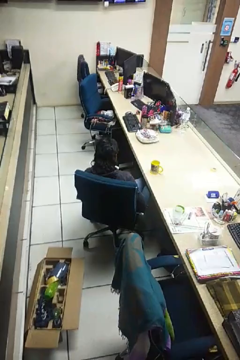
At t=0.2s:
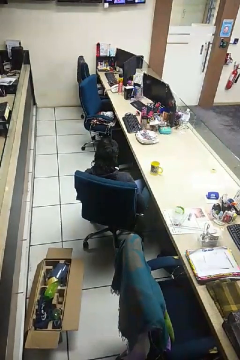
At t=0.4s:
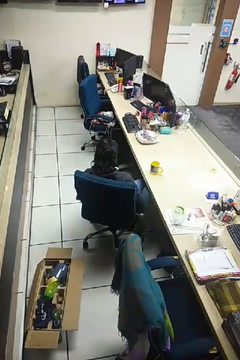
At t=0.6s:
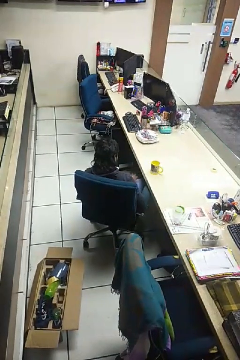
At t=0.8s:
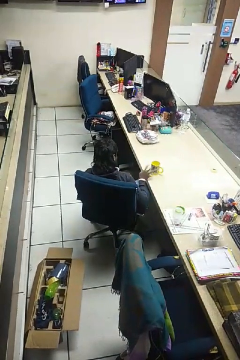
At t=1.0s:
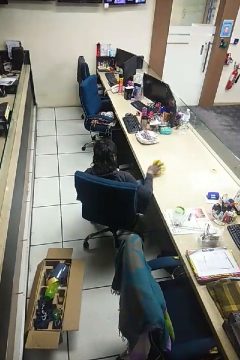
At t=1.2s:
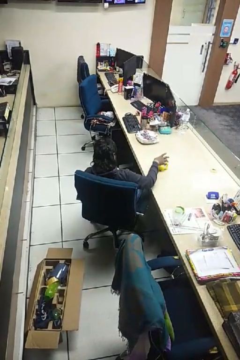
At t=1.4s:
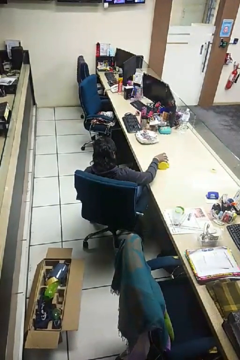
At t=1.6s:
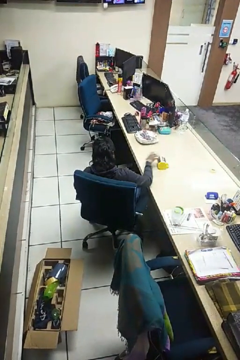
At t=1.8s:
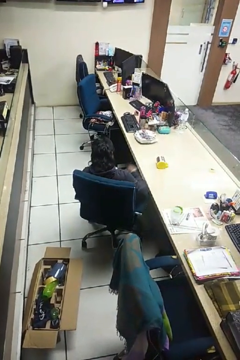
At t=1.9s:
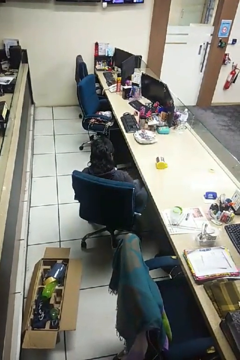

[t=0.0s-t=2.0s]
person knocks over glass

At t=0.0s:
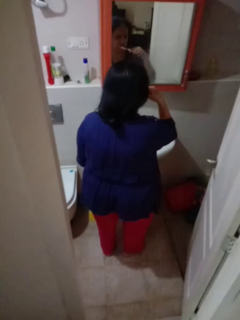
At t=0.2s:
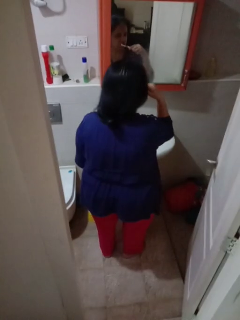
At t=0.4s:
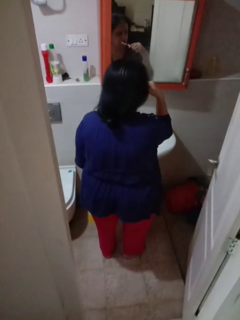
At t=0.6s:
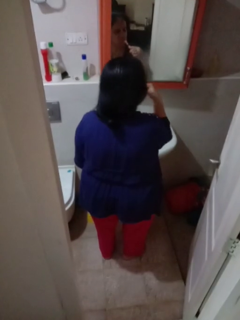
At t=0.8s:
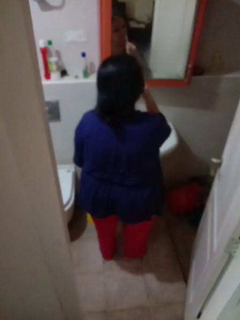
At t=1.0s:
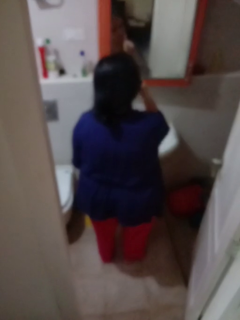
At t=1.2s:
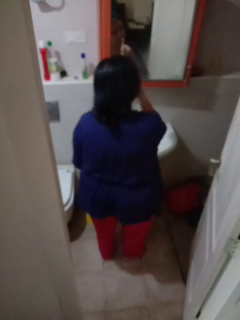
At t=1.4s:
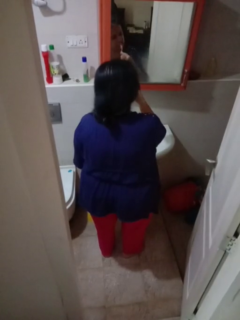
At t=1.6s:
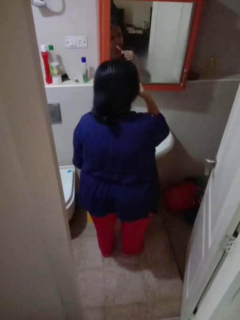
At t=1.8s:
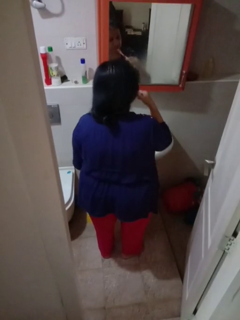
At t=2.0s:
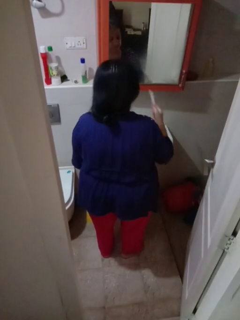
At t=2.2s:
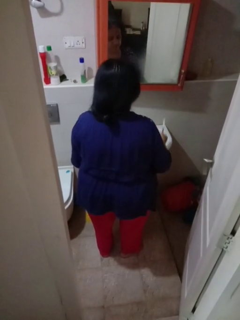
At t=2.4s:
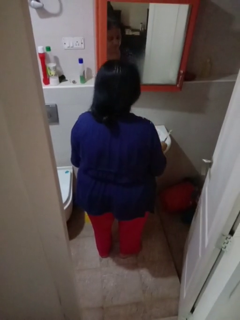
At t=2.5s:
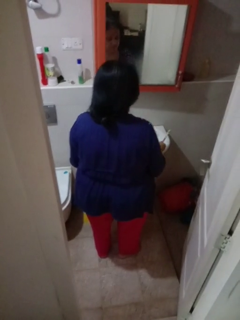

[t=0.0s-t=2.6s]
person brushes teeth

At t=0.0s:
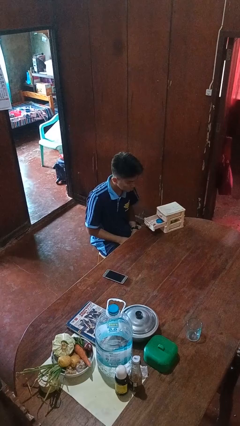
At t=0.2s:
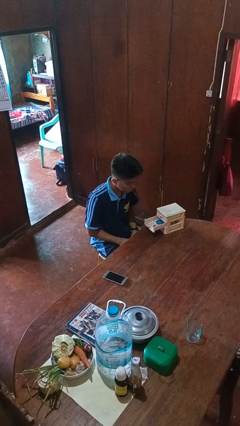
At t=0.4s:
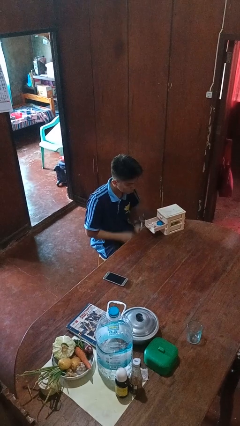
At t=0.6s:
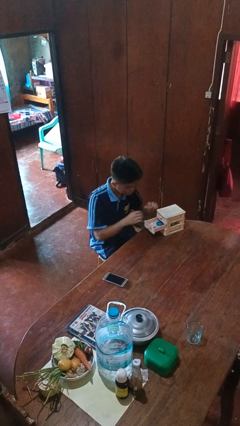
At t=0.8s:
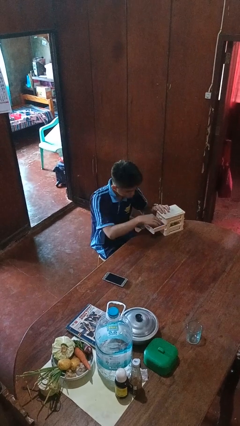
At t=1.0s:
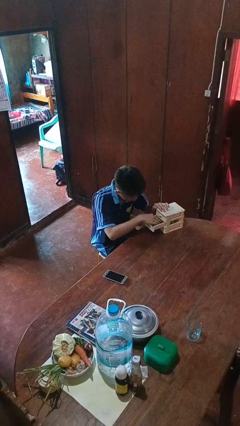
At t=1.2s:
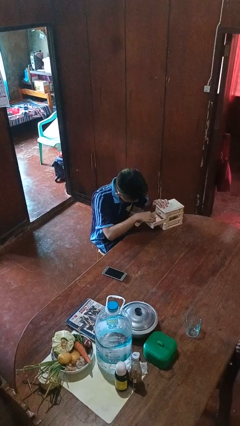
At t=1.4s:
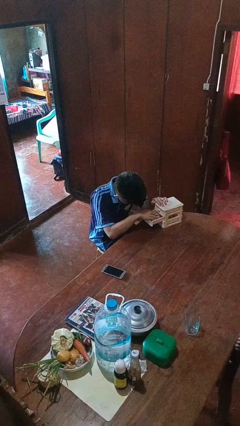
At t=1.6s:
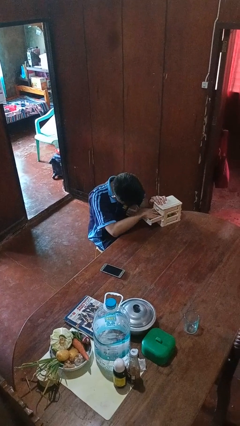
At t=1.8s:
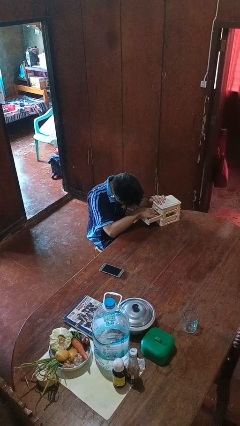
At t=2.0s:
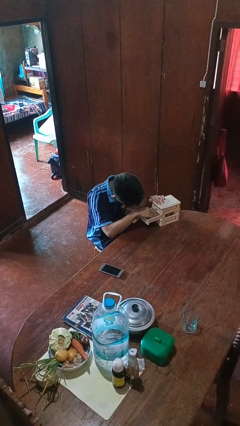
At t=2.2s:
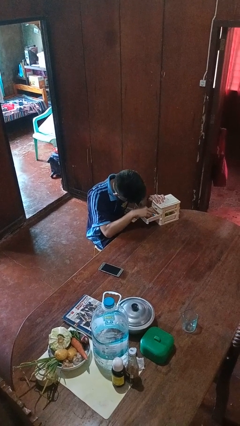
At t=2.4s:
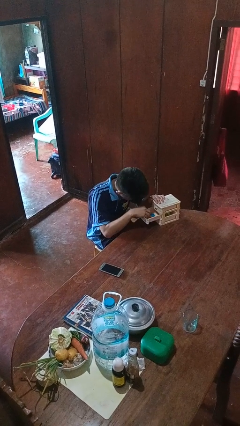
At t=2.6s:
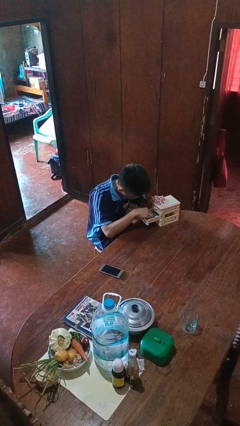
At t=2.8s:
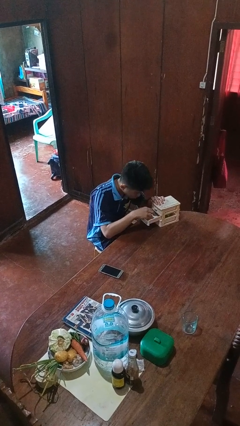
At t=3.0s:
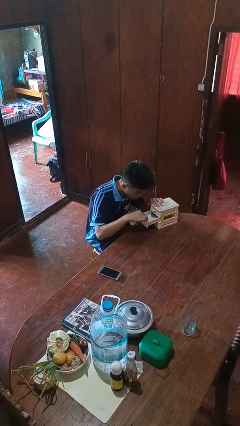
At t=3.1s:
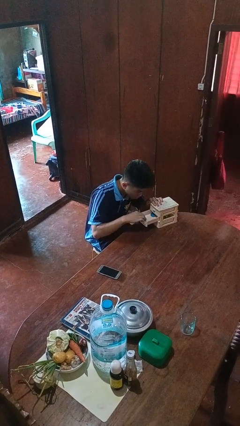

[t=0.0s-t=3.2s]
person searches jewelry box

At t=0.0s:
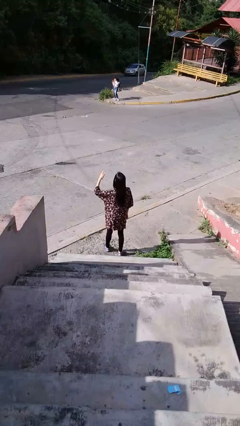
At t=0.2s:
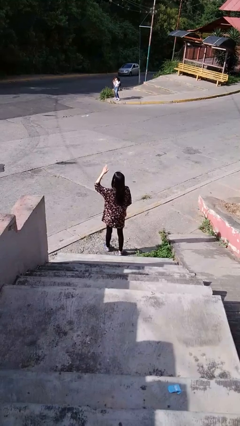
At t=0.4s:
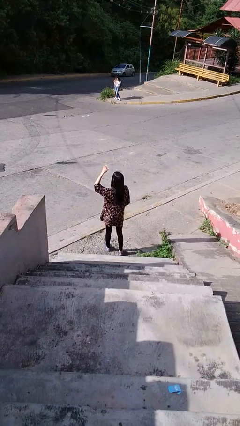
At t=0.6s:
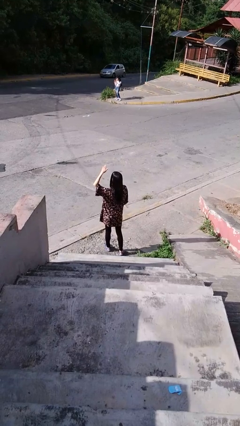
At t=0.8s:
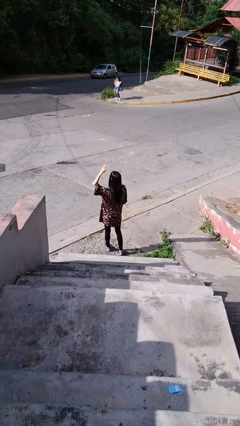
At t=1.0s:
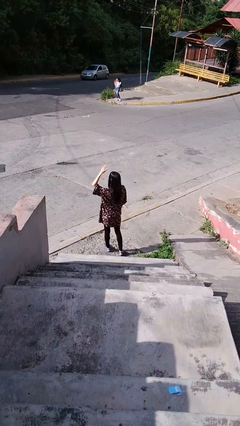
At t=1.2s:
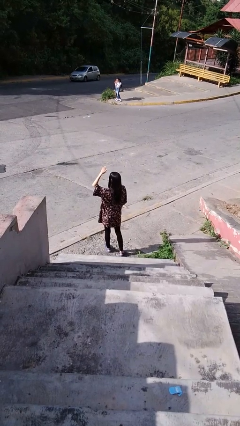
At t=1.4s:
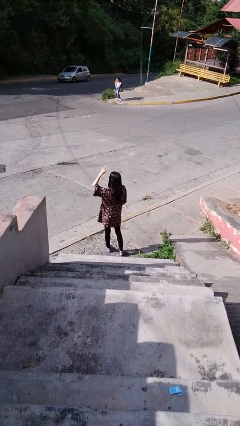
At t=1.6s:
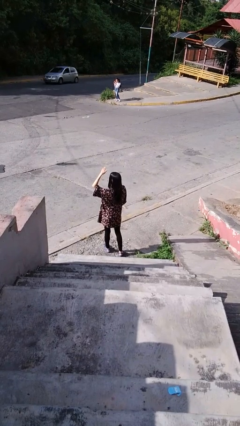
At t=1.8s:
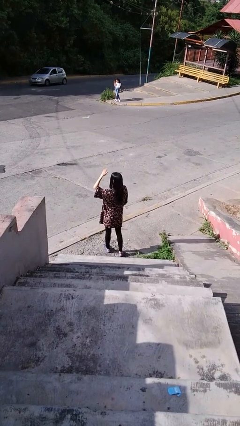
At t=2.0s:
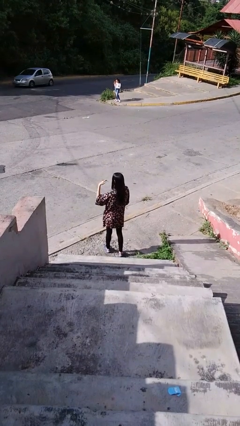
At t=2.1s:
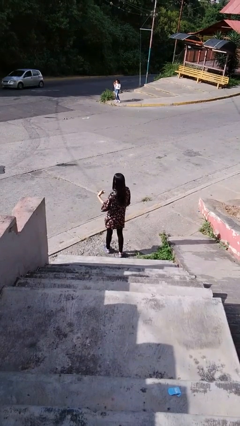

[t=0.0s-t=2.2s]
person shades eyes

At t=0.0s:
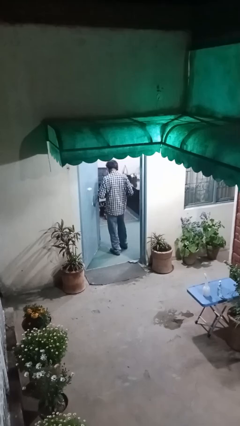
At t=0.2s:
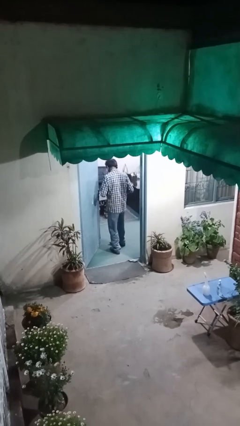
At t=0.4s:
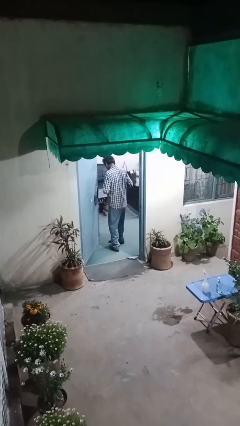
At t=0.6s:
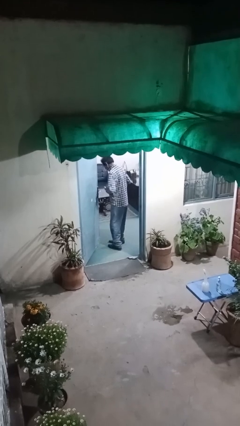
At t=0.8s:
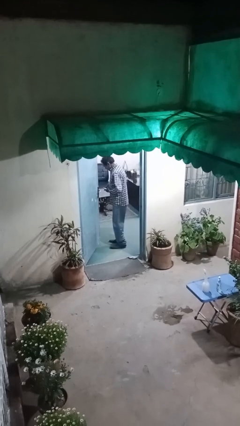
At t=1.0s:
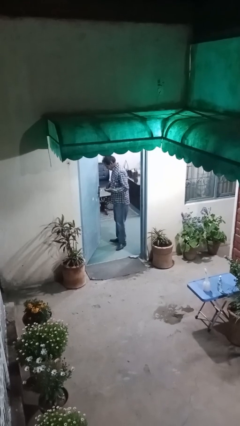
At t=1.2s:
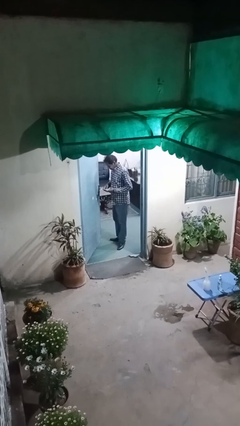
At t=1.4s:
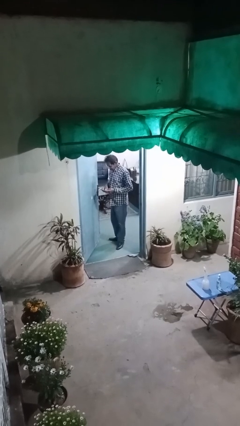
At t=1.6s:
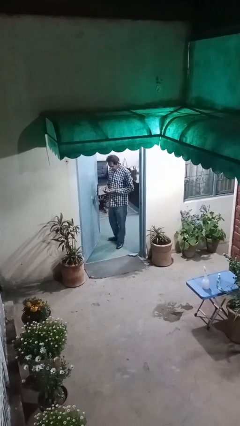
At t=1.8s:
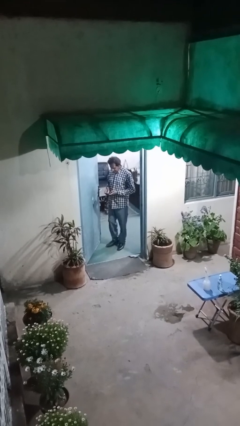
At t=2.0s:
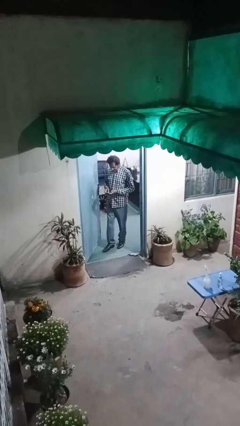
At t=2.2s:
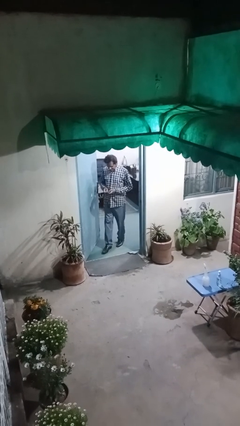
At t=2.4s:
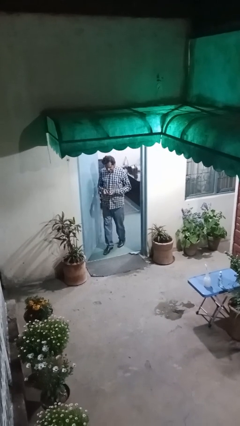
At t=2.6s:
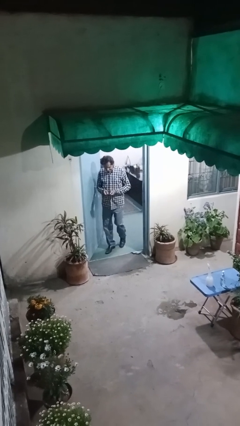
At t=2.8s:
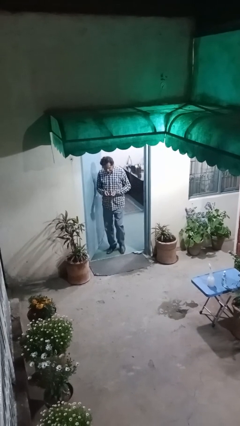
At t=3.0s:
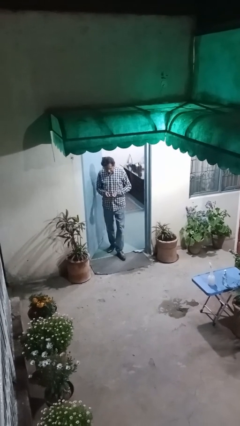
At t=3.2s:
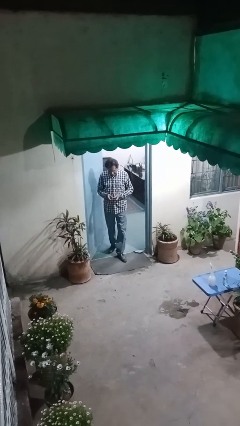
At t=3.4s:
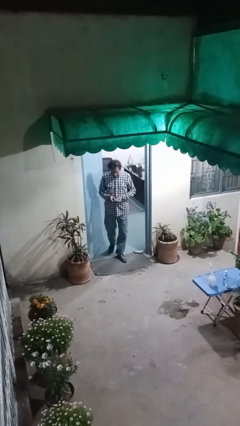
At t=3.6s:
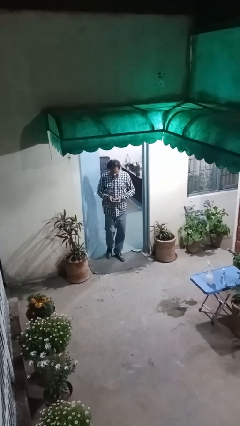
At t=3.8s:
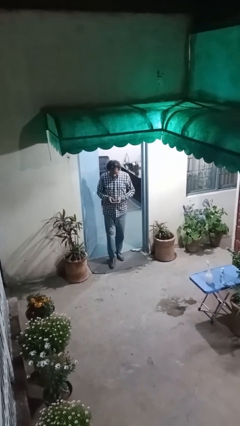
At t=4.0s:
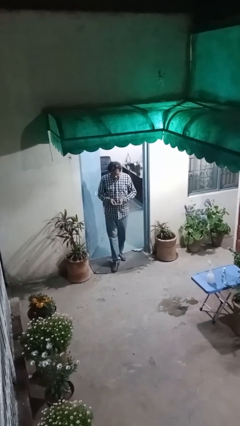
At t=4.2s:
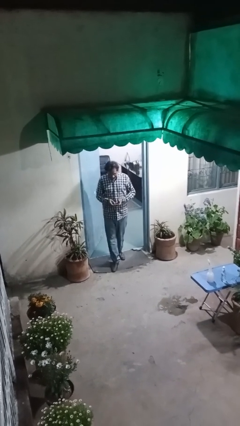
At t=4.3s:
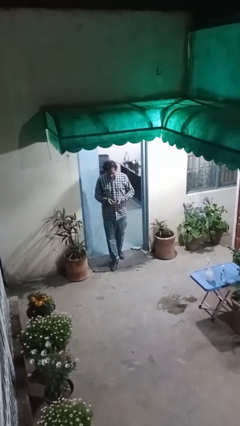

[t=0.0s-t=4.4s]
person enters scene through structure

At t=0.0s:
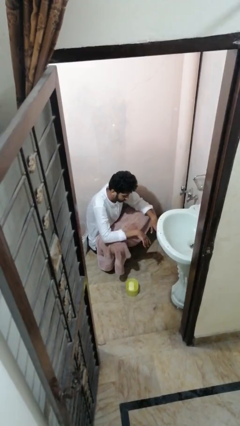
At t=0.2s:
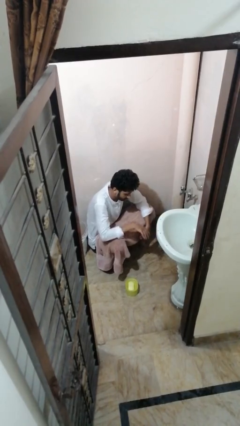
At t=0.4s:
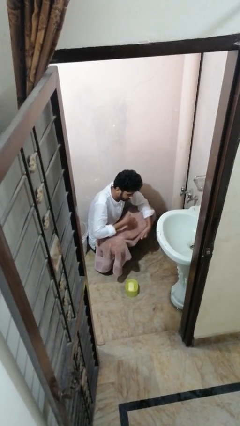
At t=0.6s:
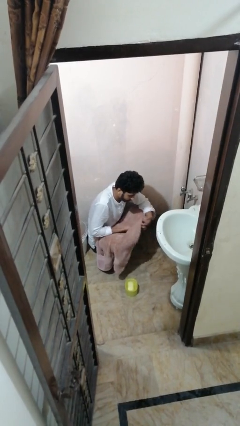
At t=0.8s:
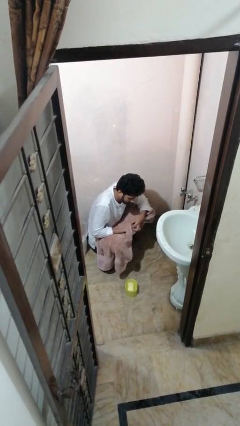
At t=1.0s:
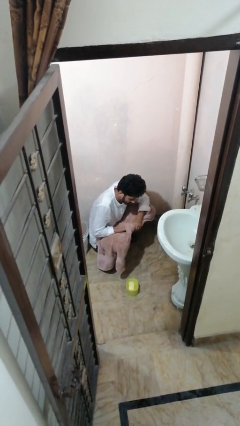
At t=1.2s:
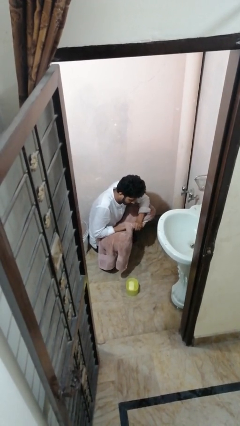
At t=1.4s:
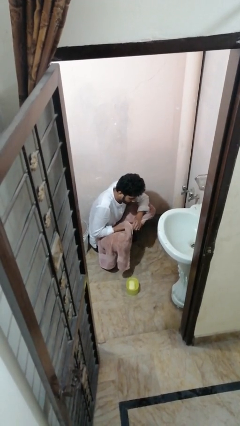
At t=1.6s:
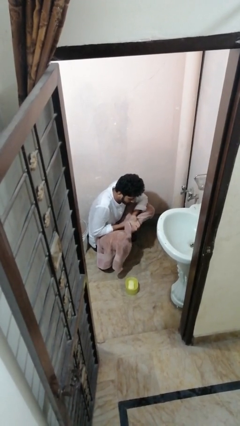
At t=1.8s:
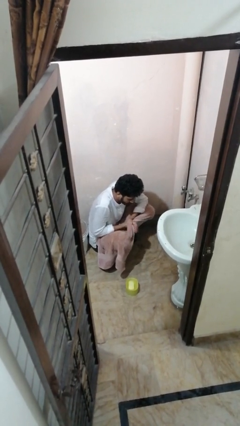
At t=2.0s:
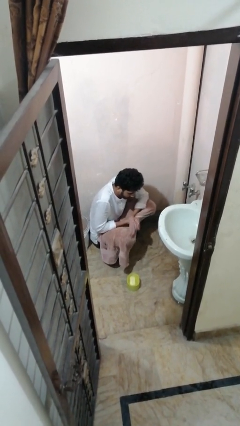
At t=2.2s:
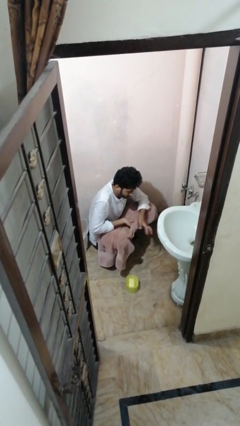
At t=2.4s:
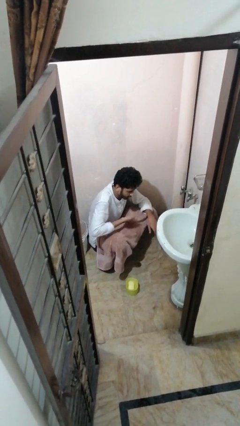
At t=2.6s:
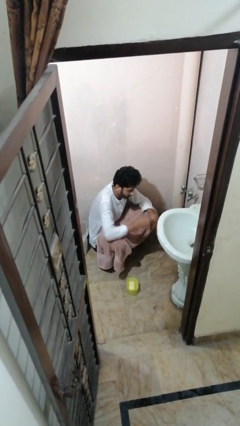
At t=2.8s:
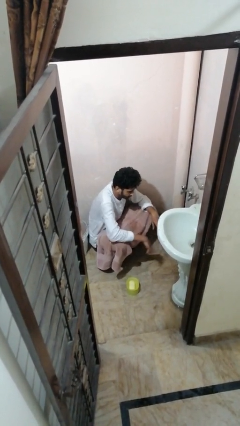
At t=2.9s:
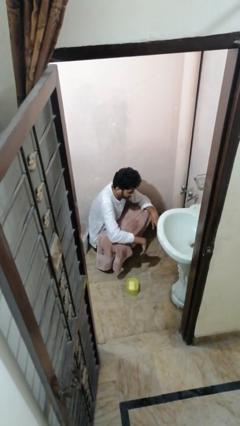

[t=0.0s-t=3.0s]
person dries hands with towel

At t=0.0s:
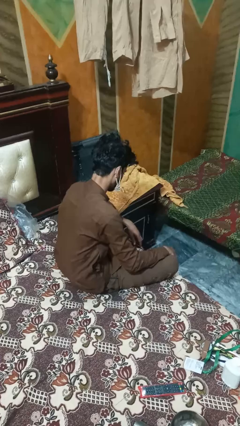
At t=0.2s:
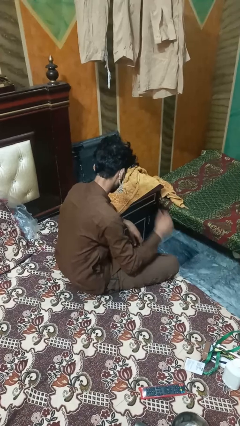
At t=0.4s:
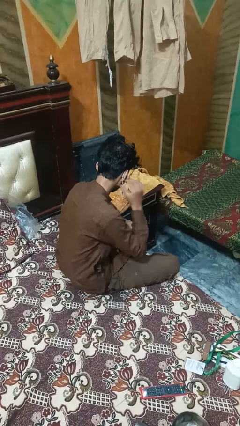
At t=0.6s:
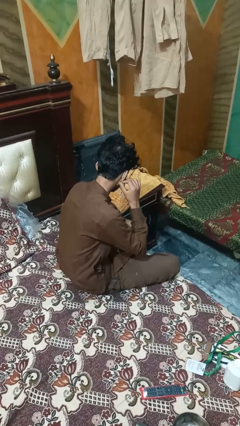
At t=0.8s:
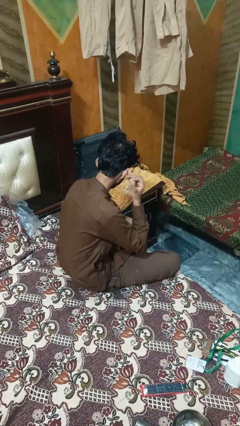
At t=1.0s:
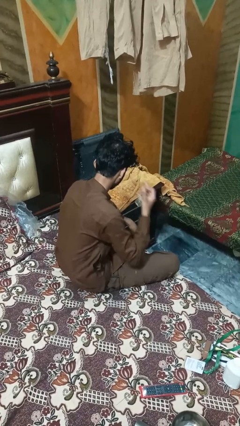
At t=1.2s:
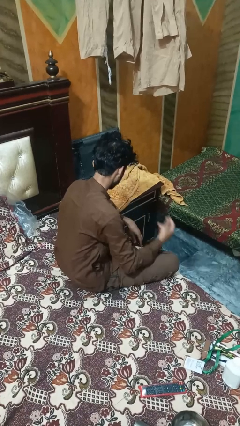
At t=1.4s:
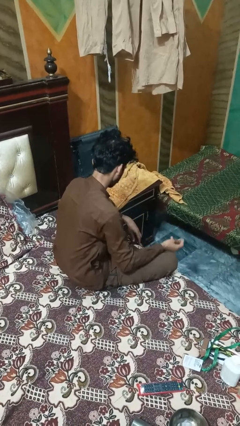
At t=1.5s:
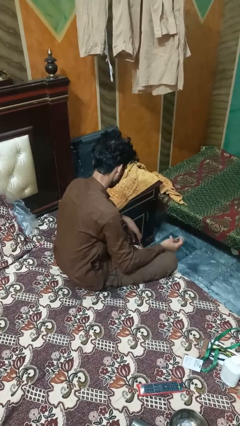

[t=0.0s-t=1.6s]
person takes off earrings
